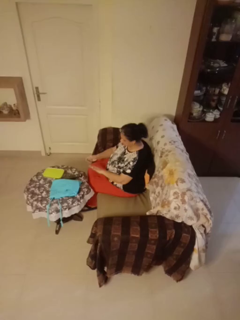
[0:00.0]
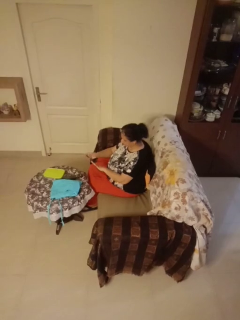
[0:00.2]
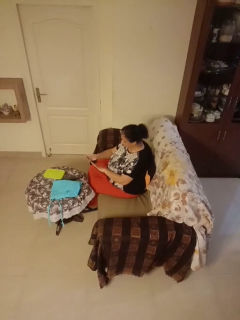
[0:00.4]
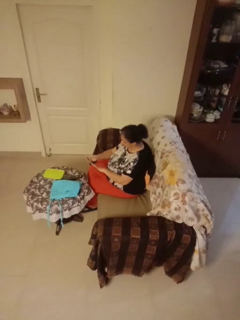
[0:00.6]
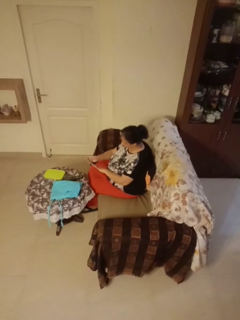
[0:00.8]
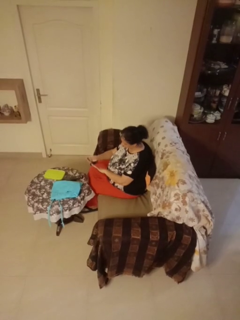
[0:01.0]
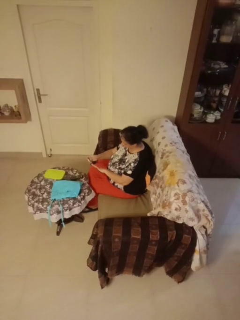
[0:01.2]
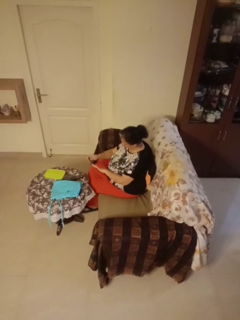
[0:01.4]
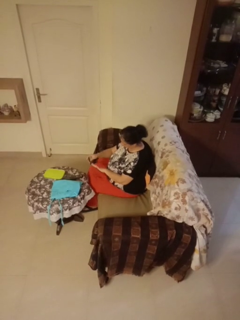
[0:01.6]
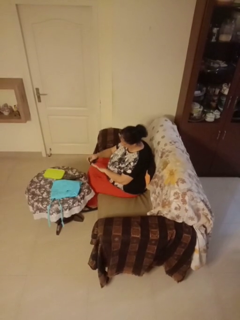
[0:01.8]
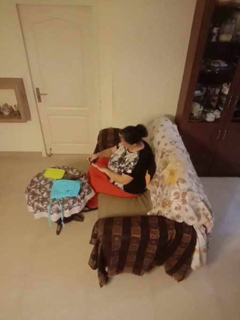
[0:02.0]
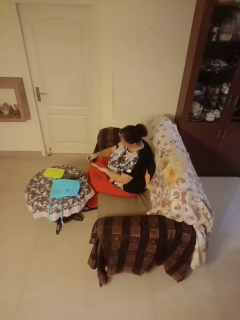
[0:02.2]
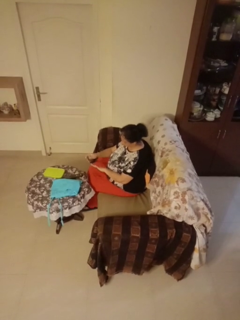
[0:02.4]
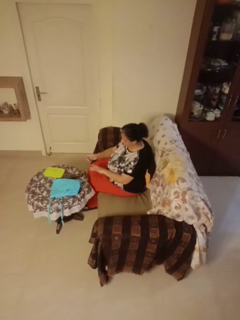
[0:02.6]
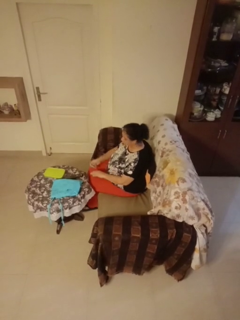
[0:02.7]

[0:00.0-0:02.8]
person clips fingernails

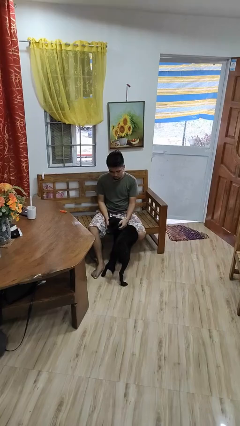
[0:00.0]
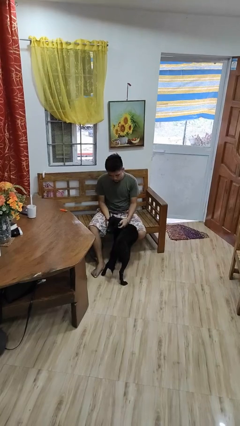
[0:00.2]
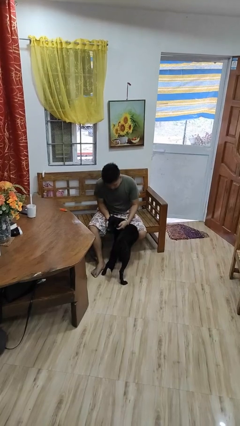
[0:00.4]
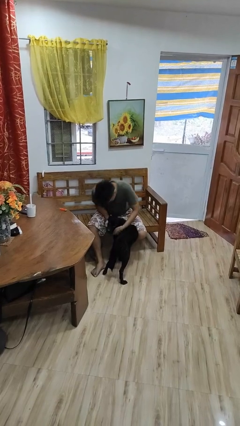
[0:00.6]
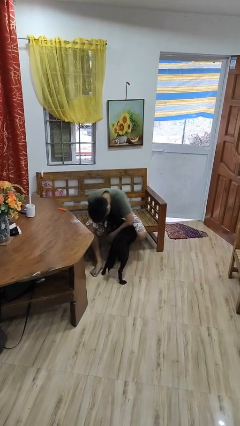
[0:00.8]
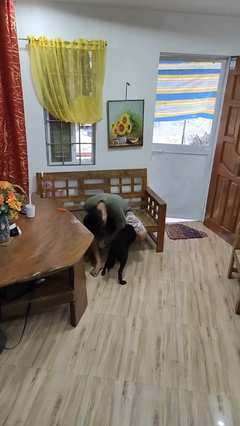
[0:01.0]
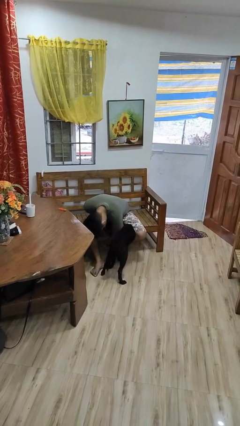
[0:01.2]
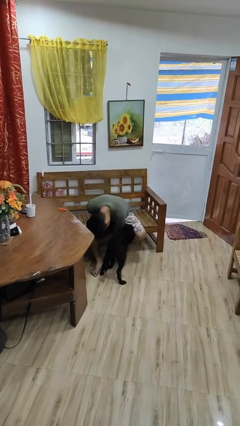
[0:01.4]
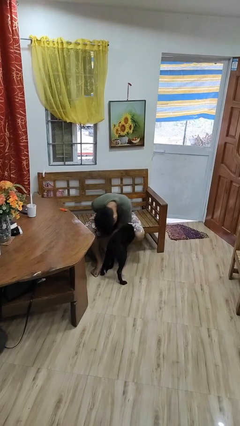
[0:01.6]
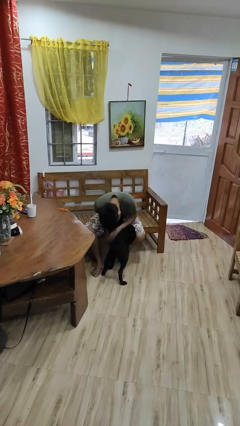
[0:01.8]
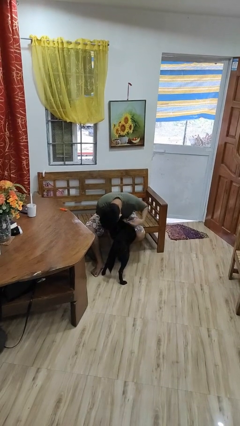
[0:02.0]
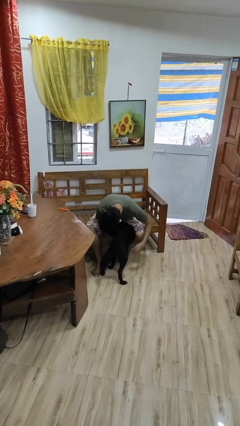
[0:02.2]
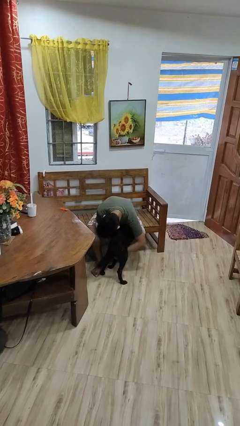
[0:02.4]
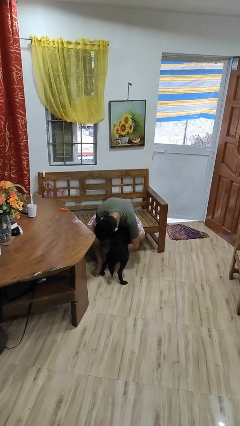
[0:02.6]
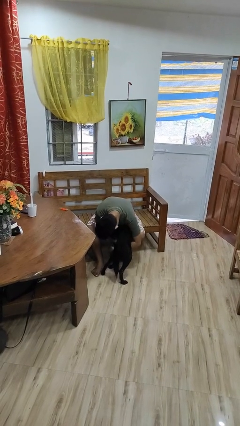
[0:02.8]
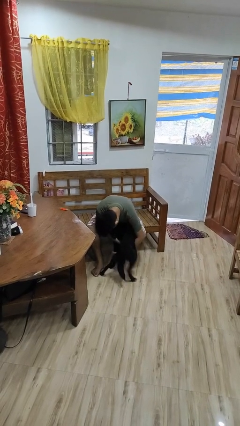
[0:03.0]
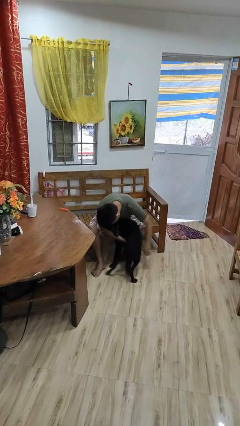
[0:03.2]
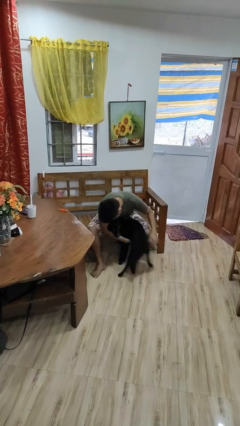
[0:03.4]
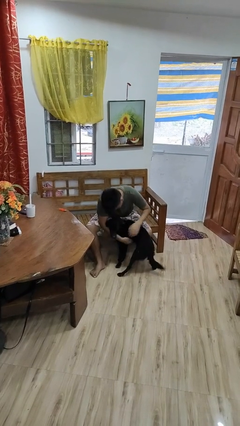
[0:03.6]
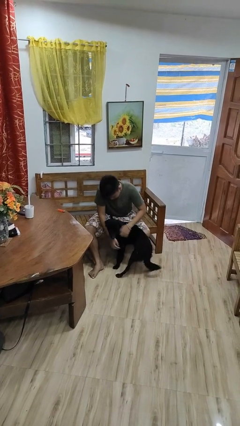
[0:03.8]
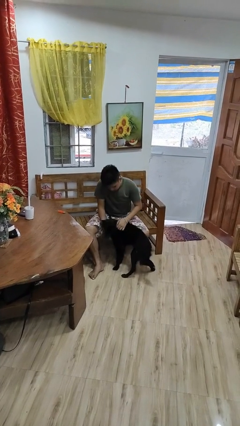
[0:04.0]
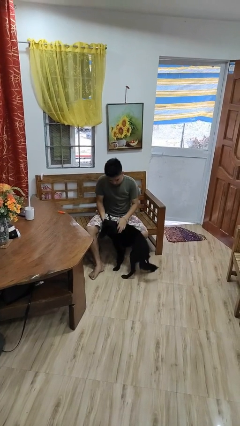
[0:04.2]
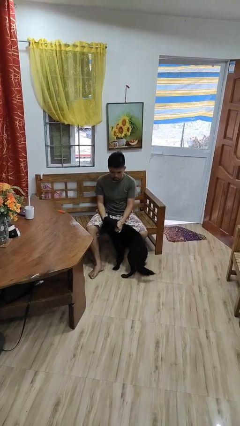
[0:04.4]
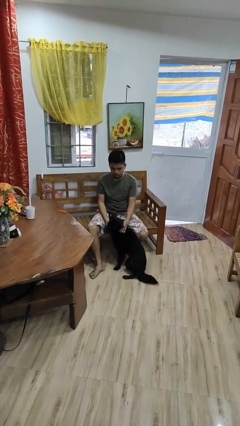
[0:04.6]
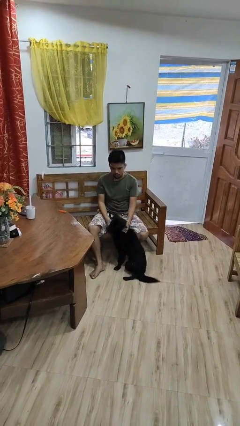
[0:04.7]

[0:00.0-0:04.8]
person hugs dog

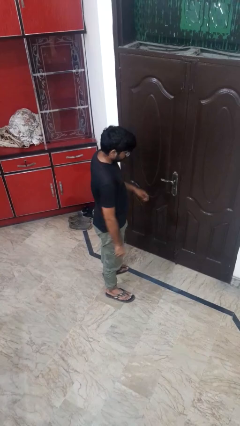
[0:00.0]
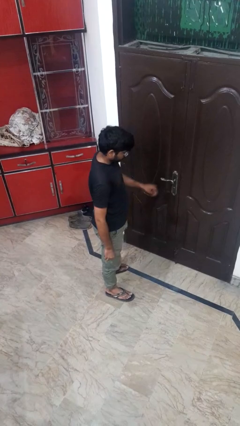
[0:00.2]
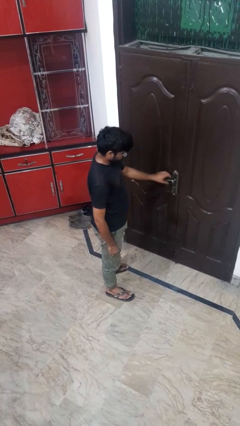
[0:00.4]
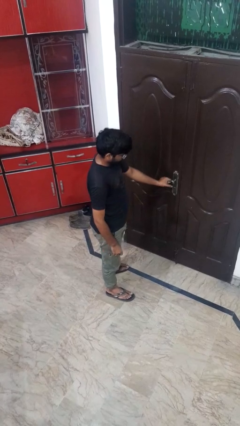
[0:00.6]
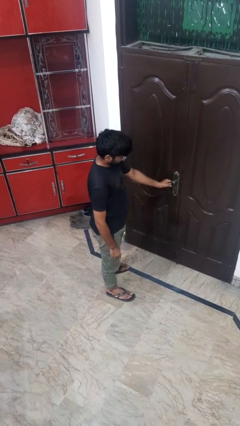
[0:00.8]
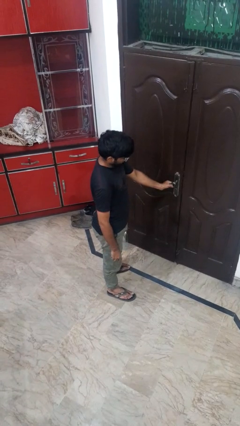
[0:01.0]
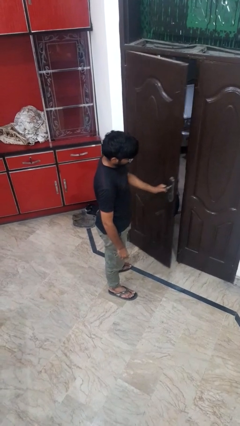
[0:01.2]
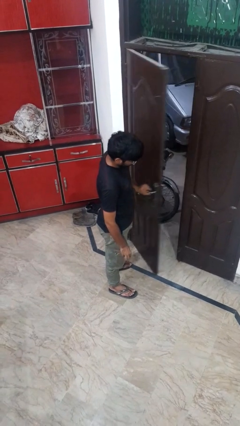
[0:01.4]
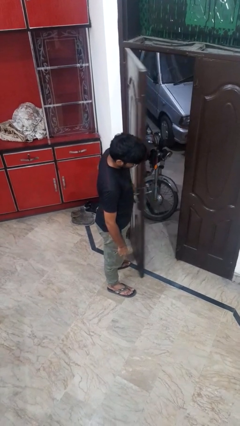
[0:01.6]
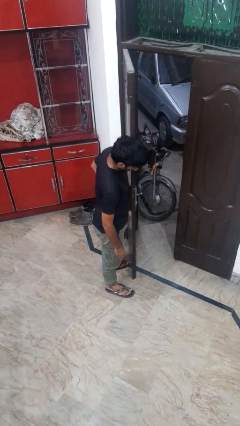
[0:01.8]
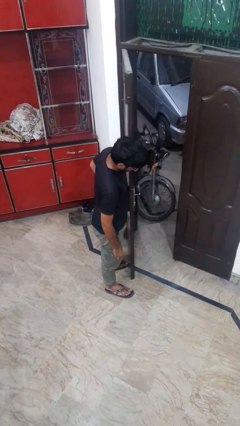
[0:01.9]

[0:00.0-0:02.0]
person opens facility door

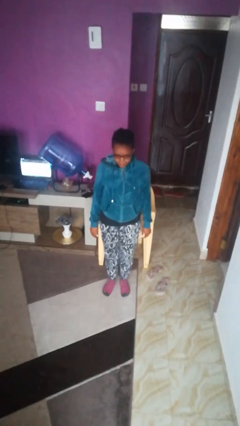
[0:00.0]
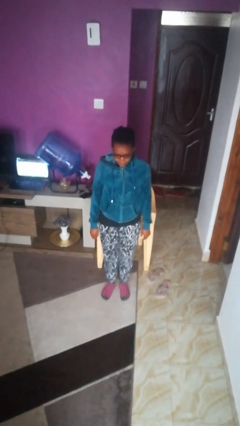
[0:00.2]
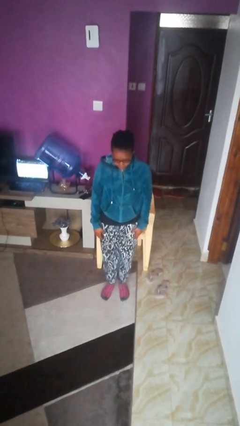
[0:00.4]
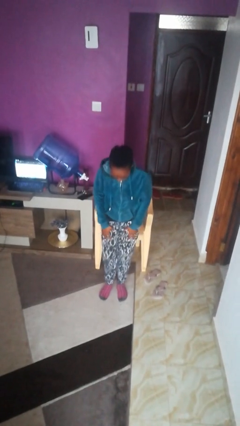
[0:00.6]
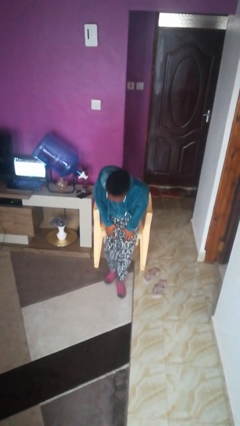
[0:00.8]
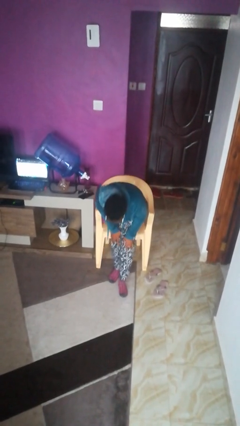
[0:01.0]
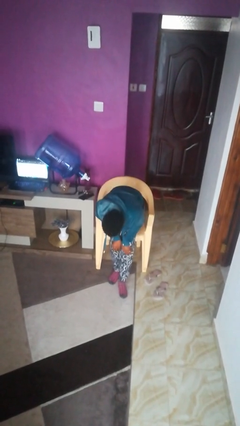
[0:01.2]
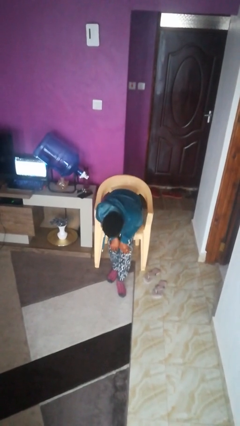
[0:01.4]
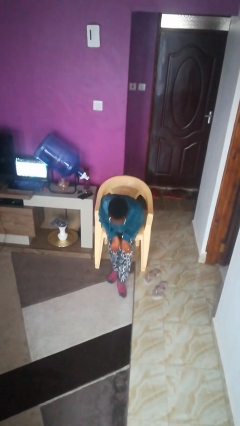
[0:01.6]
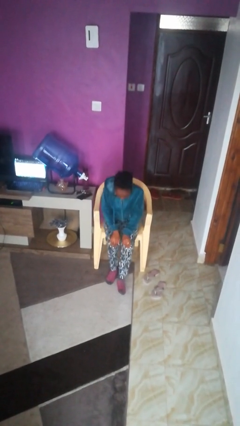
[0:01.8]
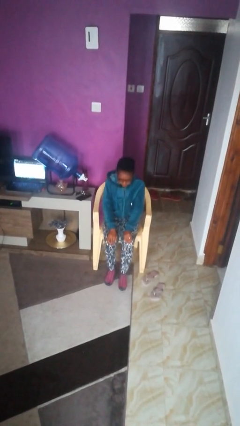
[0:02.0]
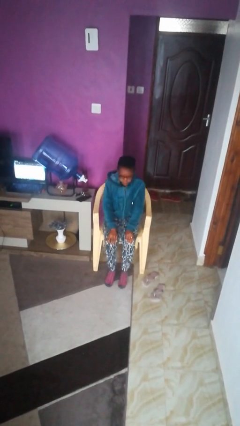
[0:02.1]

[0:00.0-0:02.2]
person sits down

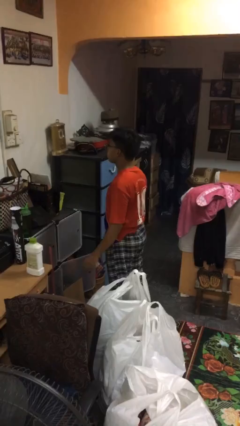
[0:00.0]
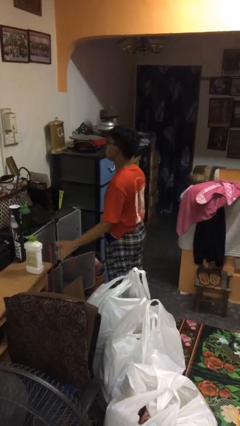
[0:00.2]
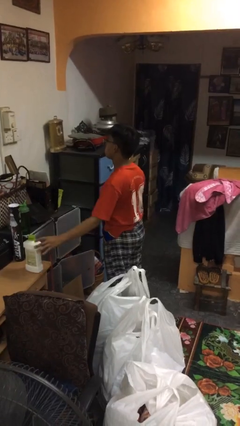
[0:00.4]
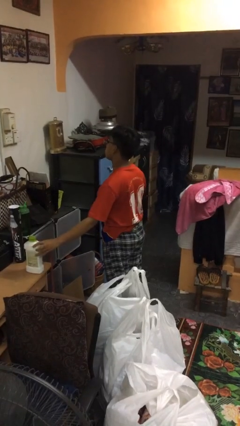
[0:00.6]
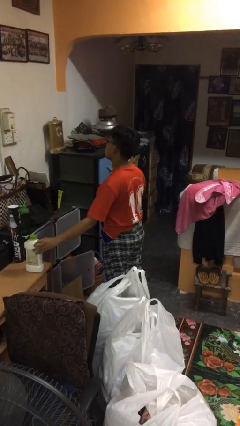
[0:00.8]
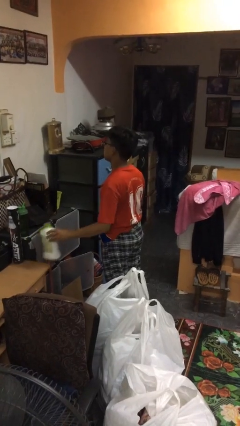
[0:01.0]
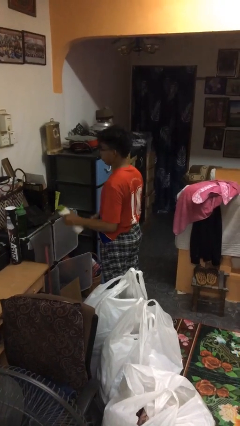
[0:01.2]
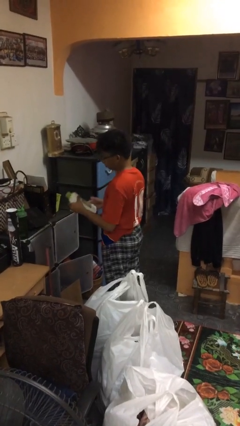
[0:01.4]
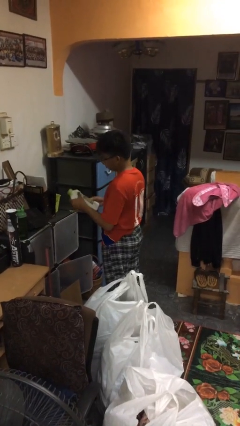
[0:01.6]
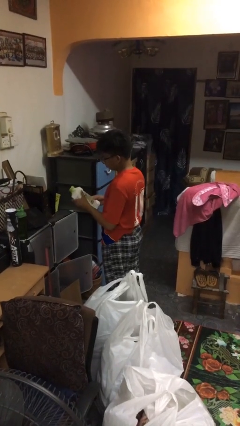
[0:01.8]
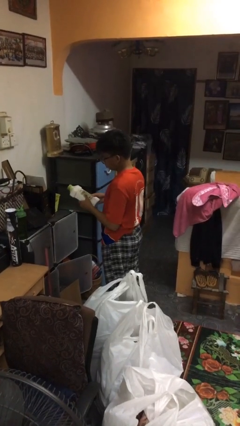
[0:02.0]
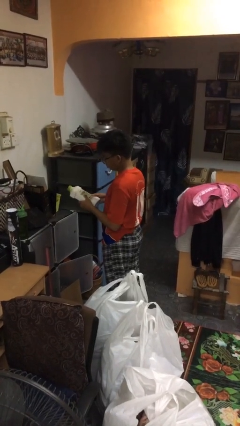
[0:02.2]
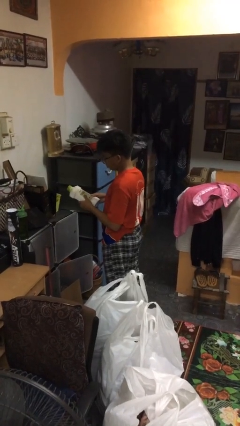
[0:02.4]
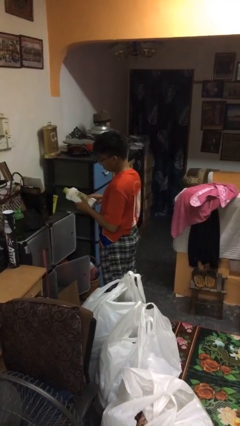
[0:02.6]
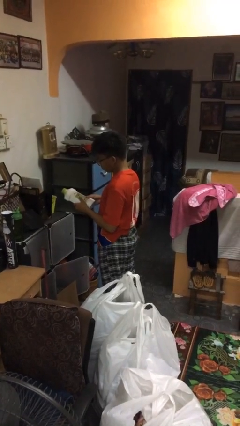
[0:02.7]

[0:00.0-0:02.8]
person picks up object from countertop

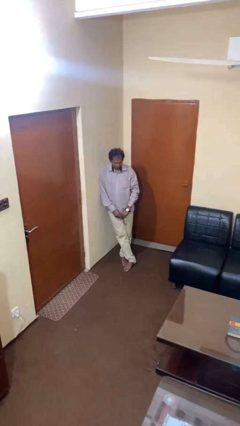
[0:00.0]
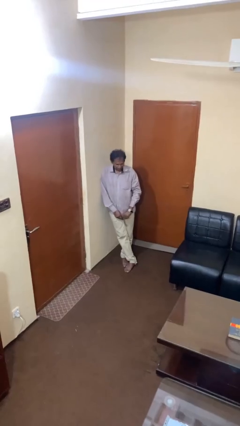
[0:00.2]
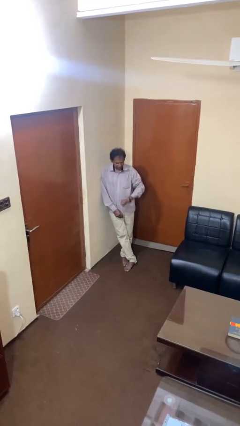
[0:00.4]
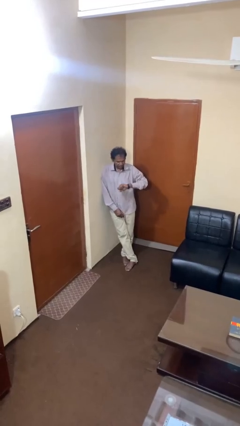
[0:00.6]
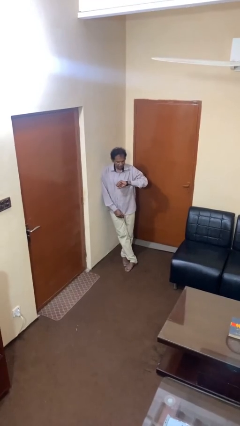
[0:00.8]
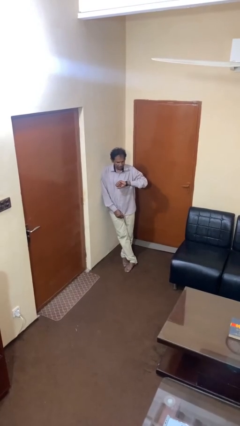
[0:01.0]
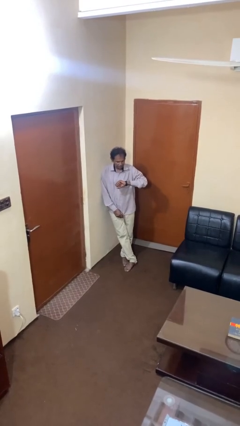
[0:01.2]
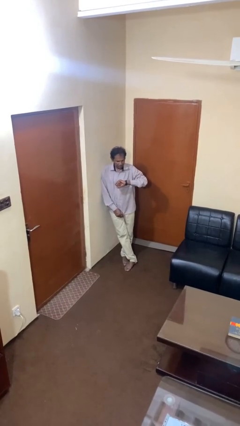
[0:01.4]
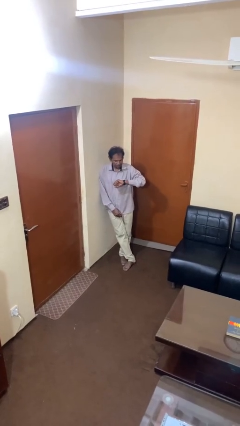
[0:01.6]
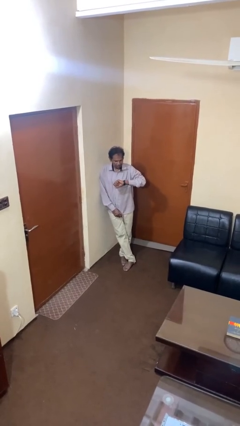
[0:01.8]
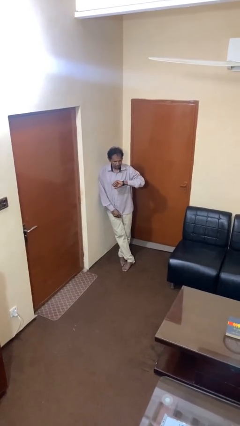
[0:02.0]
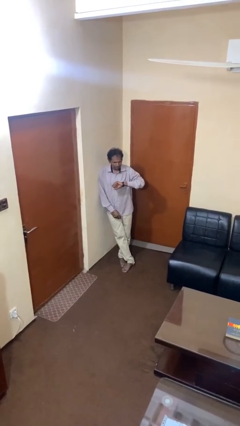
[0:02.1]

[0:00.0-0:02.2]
person looks at wristwatch

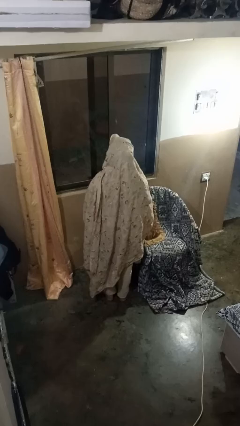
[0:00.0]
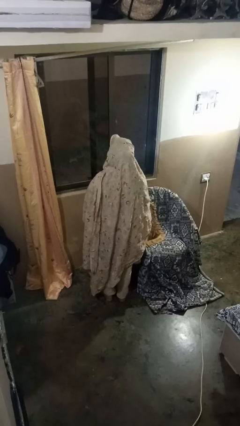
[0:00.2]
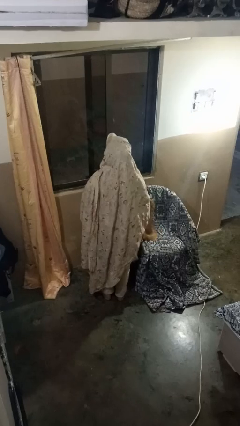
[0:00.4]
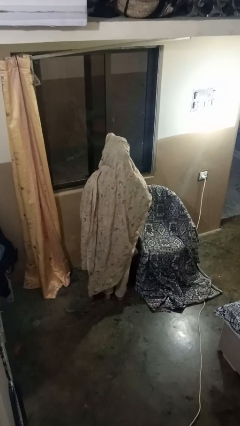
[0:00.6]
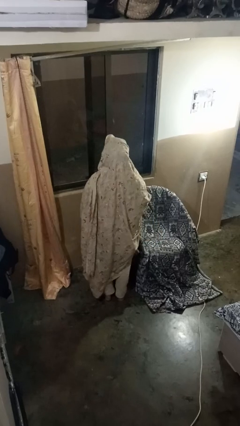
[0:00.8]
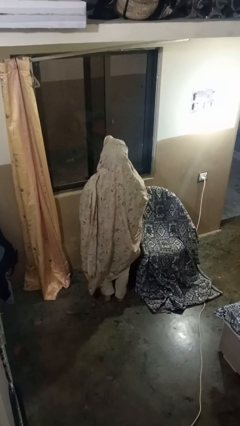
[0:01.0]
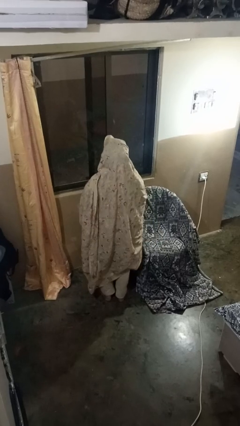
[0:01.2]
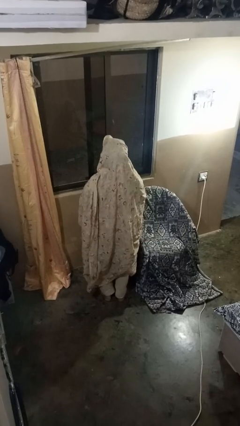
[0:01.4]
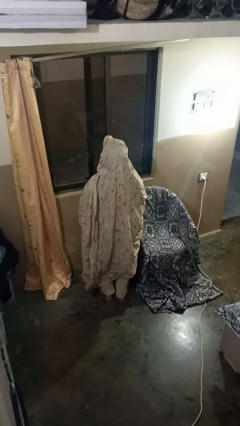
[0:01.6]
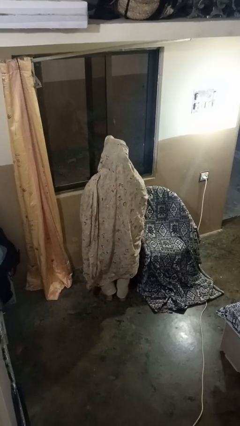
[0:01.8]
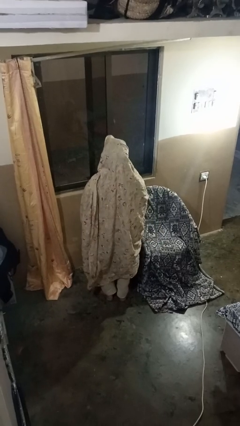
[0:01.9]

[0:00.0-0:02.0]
person picks up object from couch
